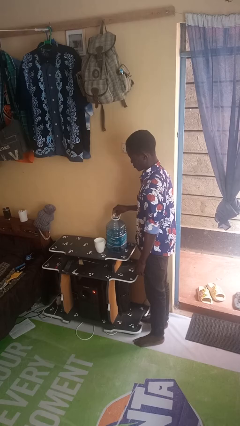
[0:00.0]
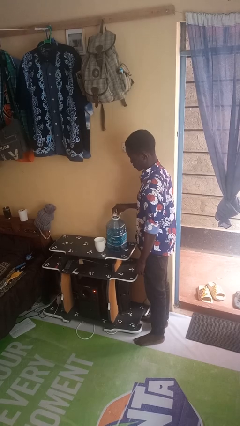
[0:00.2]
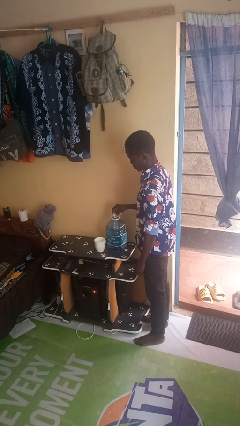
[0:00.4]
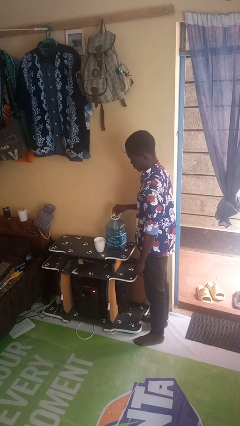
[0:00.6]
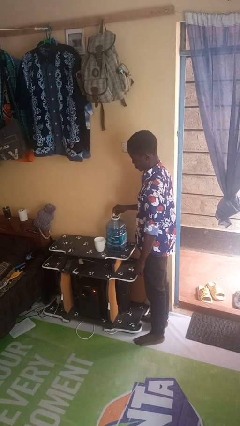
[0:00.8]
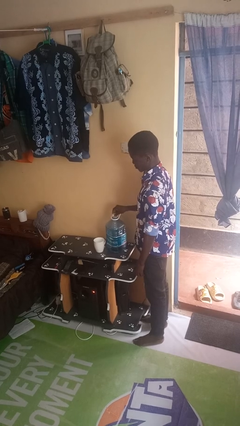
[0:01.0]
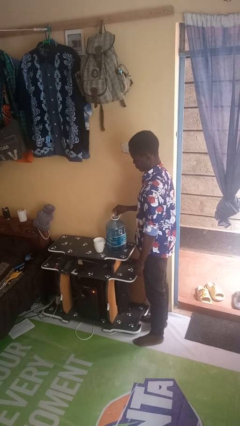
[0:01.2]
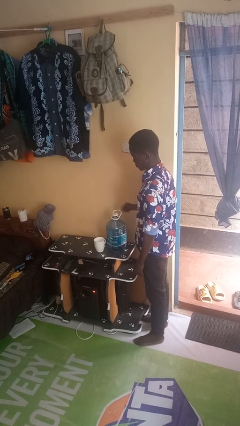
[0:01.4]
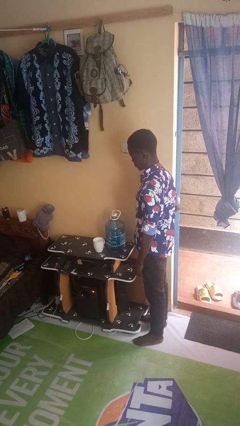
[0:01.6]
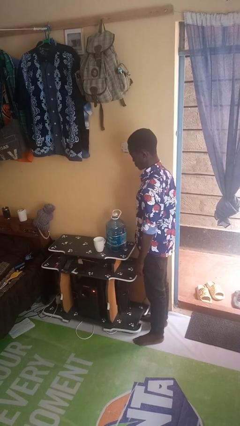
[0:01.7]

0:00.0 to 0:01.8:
person screws lid to bottle

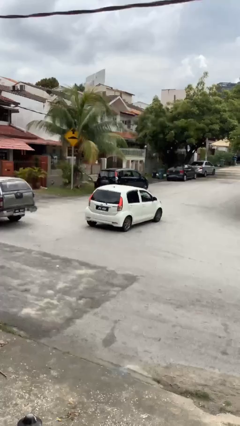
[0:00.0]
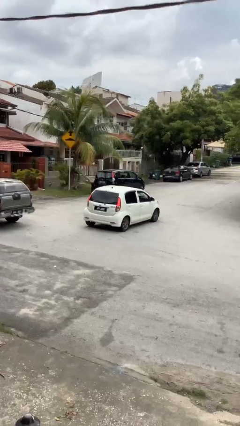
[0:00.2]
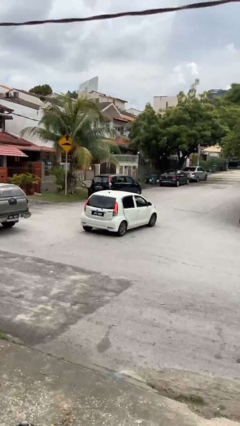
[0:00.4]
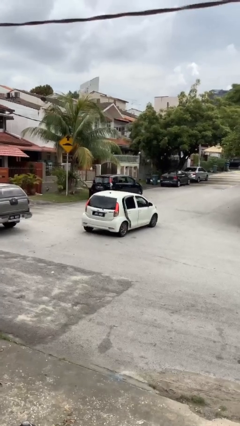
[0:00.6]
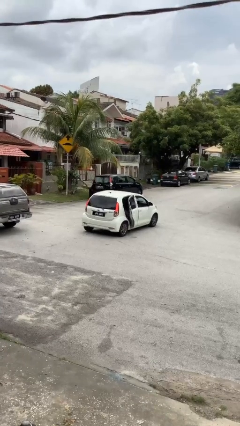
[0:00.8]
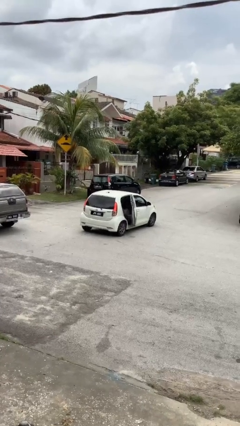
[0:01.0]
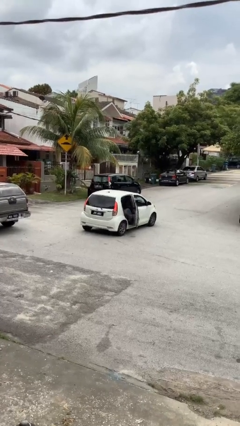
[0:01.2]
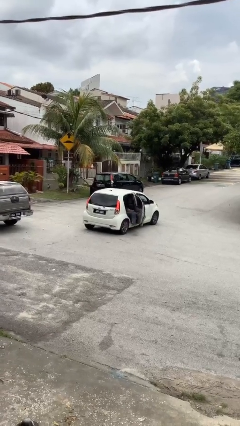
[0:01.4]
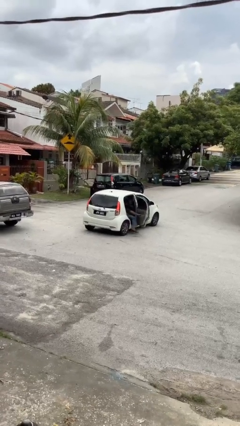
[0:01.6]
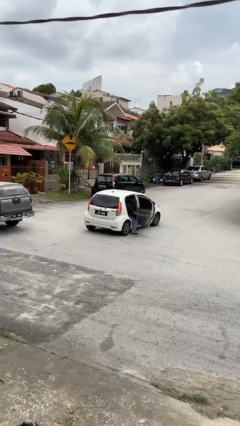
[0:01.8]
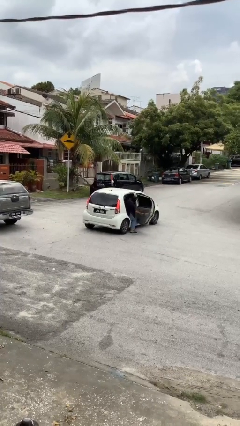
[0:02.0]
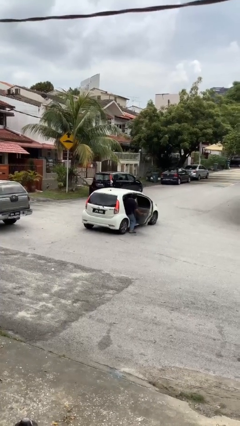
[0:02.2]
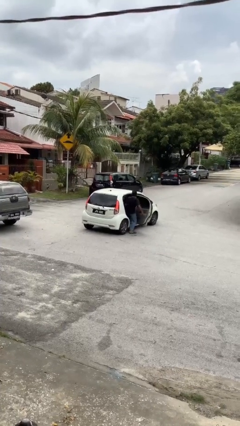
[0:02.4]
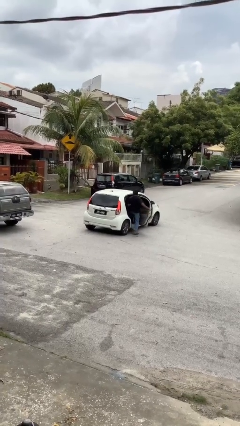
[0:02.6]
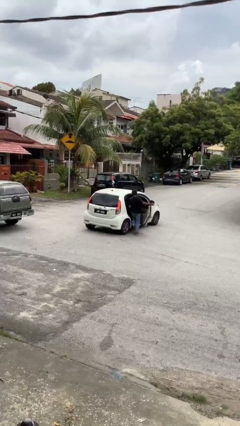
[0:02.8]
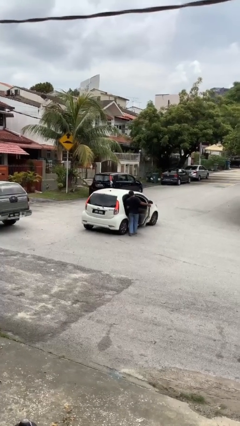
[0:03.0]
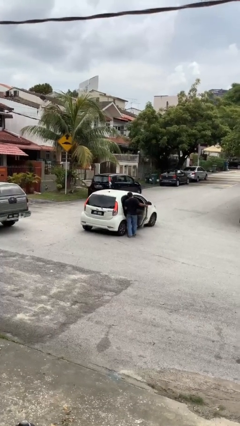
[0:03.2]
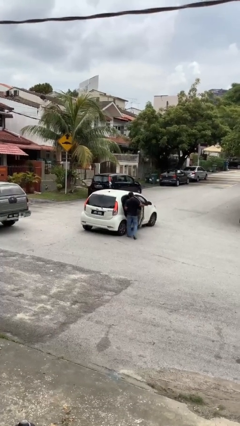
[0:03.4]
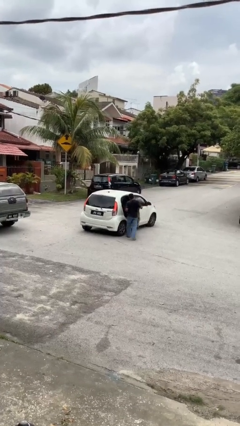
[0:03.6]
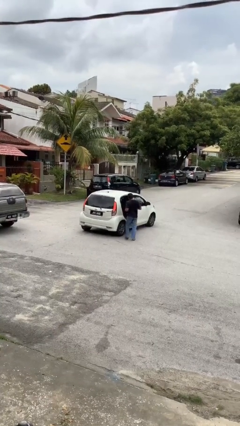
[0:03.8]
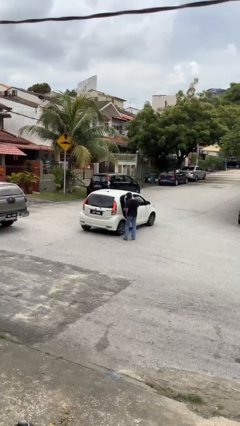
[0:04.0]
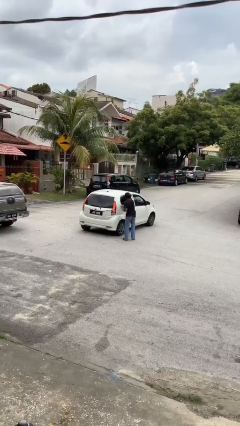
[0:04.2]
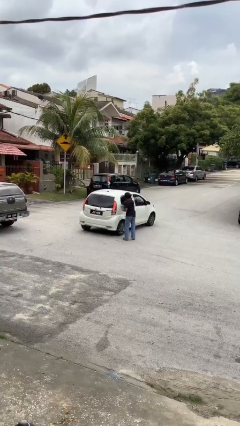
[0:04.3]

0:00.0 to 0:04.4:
car drops off person

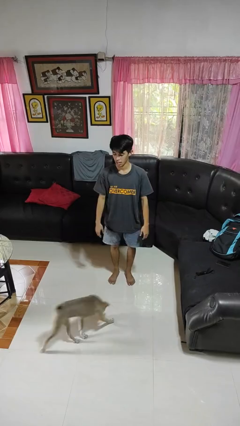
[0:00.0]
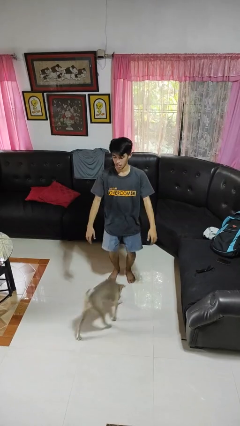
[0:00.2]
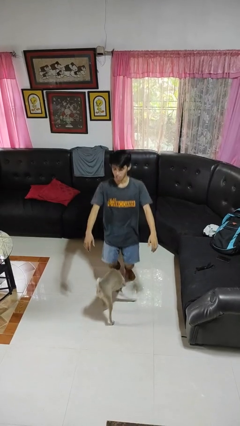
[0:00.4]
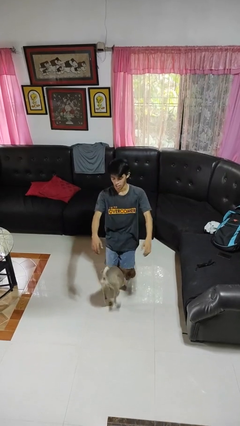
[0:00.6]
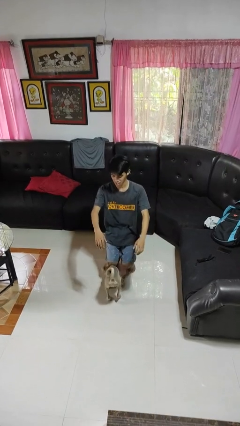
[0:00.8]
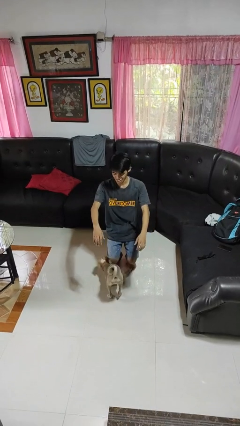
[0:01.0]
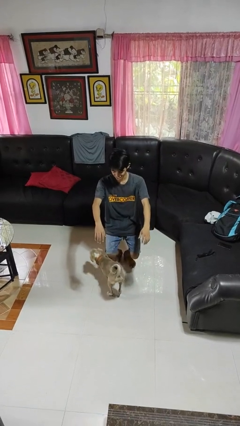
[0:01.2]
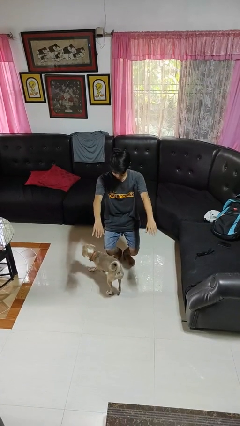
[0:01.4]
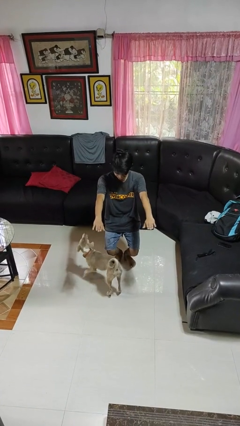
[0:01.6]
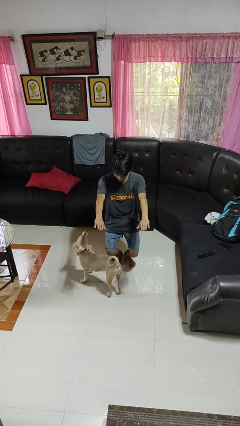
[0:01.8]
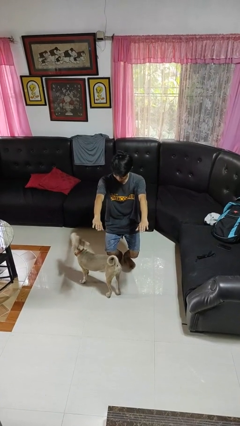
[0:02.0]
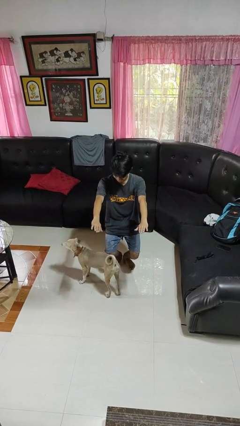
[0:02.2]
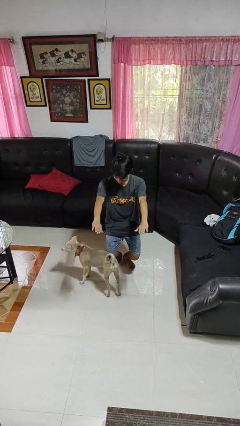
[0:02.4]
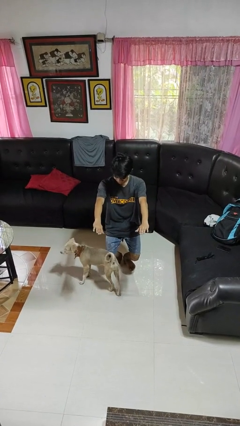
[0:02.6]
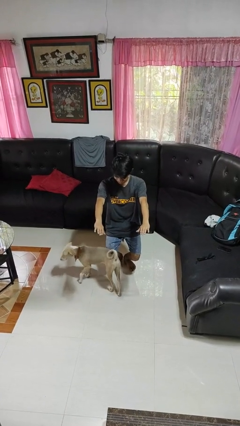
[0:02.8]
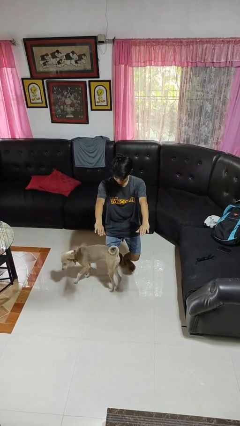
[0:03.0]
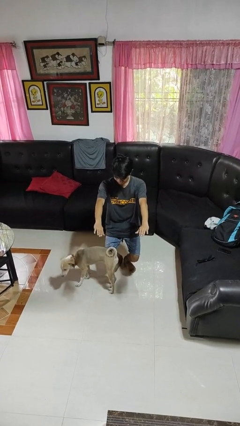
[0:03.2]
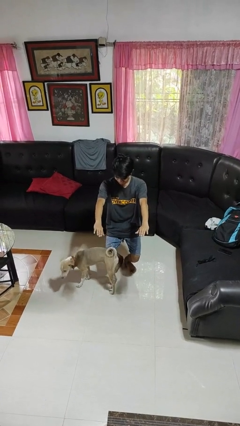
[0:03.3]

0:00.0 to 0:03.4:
person squats

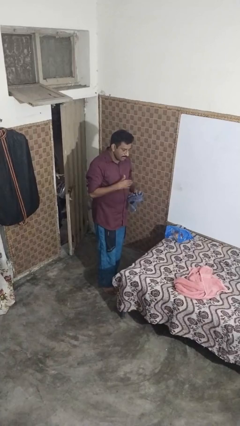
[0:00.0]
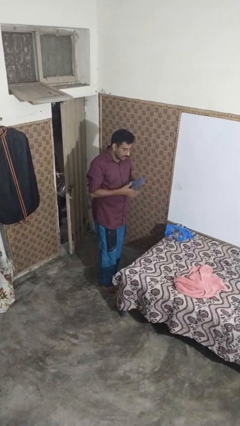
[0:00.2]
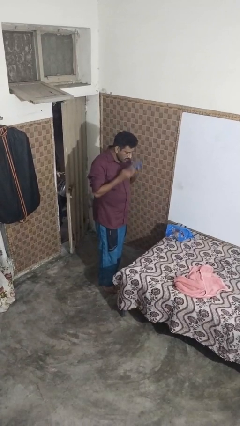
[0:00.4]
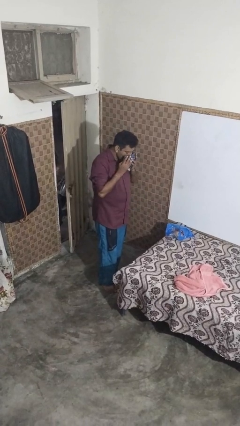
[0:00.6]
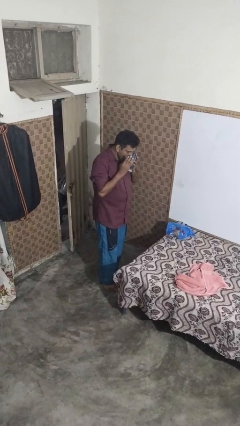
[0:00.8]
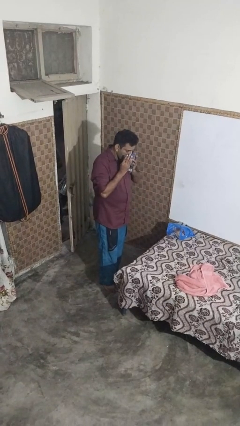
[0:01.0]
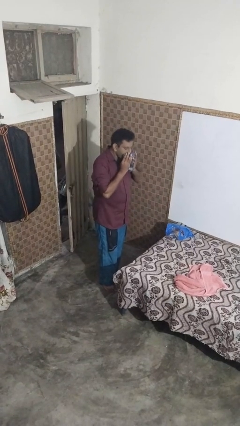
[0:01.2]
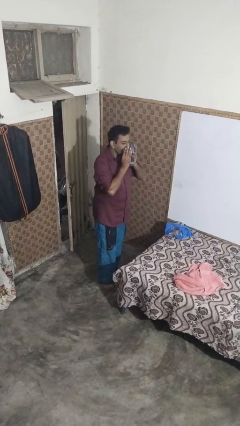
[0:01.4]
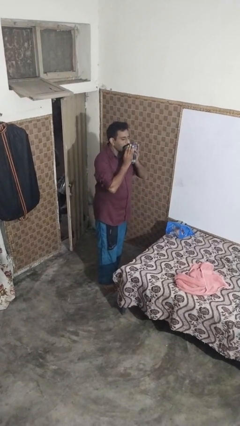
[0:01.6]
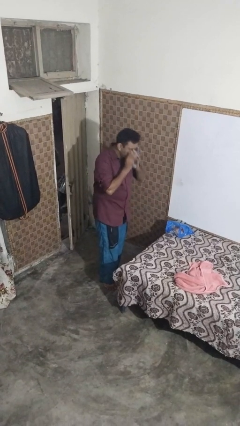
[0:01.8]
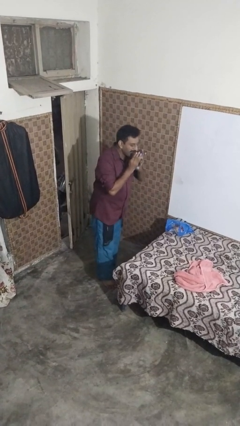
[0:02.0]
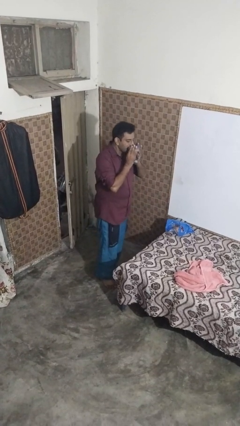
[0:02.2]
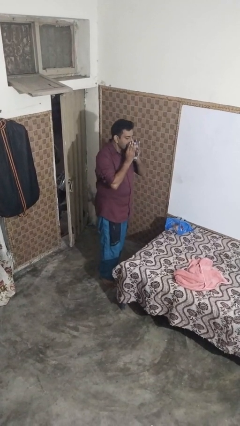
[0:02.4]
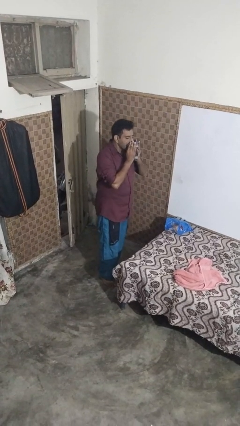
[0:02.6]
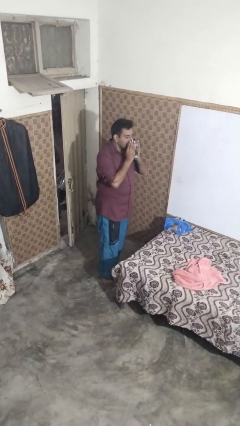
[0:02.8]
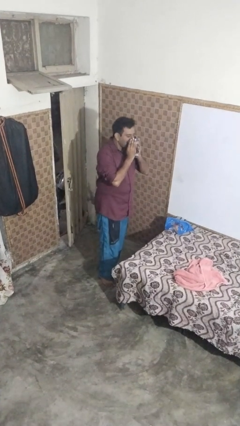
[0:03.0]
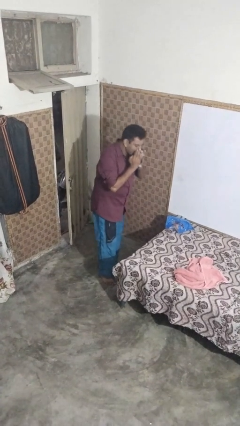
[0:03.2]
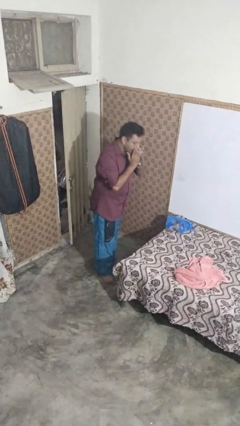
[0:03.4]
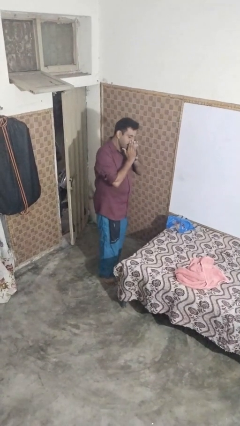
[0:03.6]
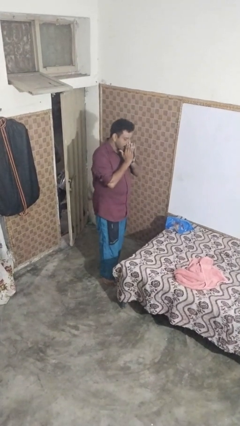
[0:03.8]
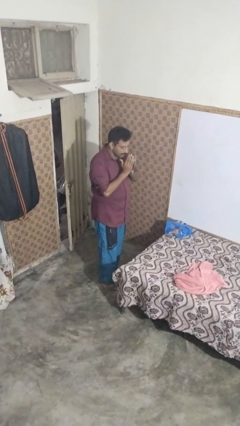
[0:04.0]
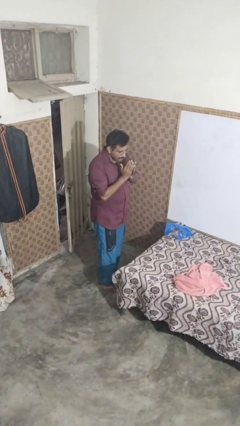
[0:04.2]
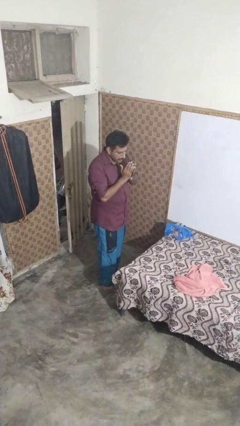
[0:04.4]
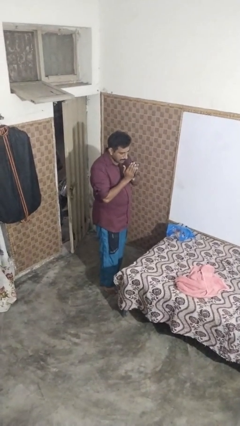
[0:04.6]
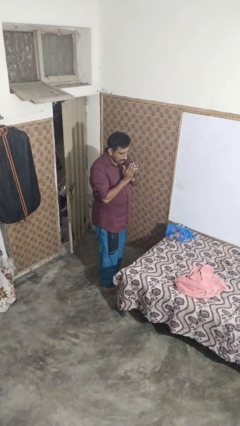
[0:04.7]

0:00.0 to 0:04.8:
person blows nose

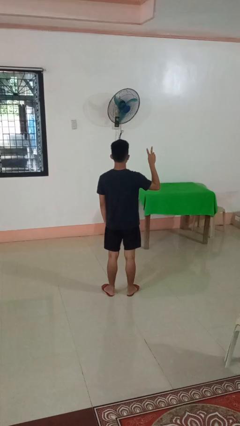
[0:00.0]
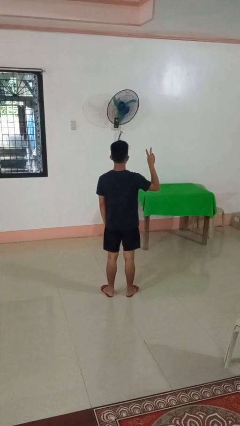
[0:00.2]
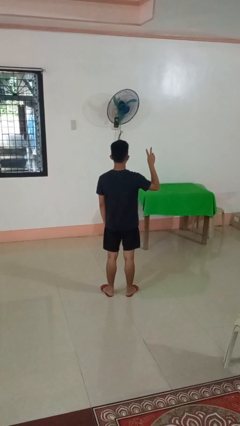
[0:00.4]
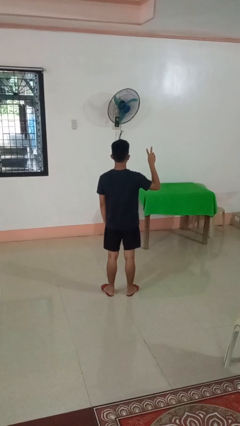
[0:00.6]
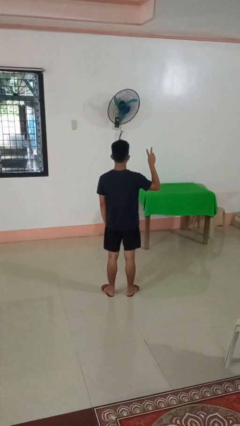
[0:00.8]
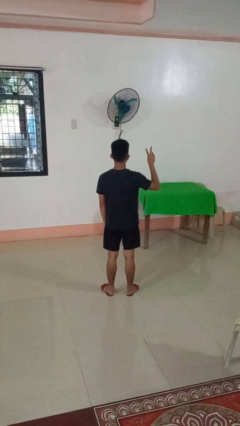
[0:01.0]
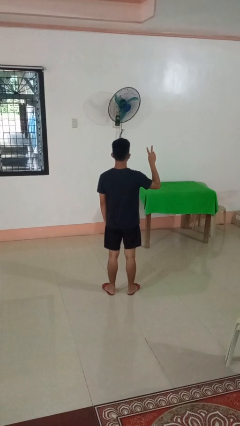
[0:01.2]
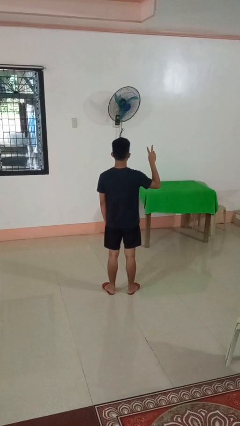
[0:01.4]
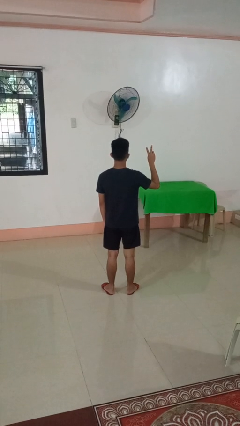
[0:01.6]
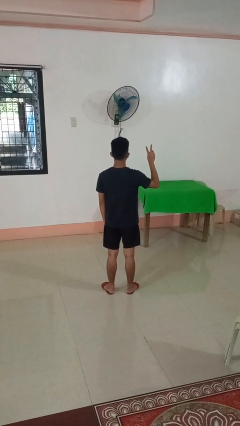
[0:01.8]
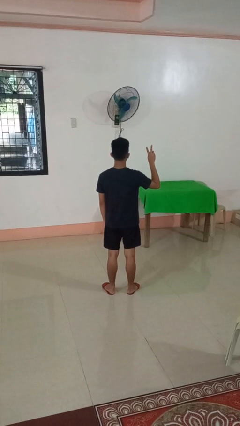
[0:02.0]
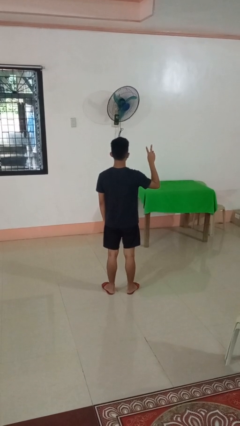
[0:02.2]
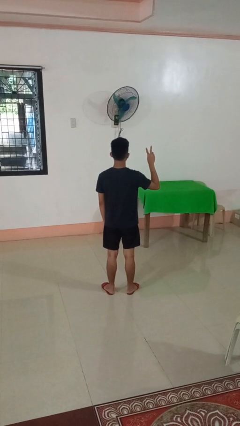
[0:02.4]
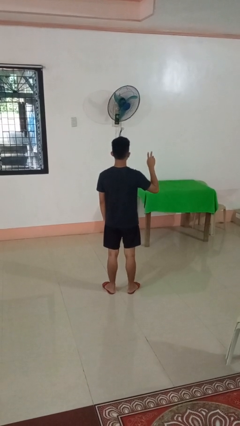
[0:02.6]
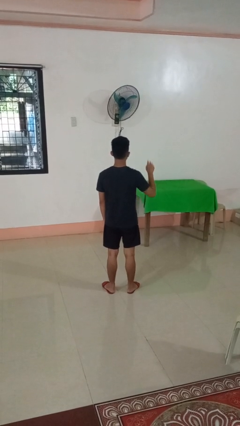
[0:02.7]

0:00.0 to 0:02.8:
person gestures peace
